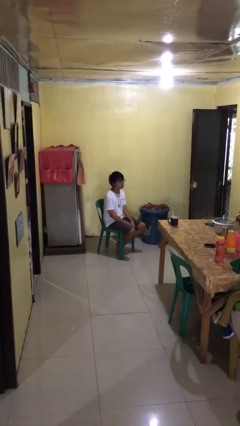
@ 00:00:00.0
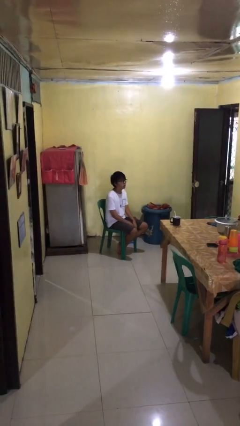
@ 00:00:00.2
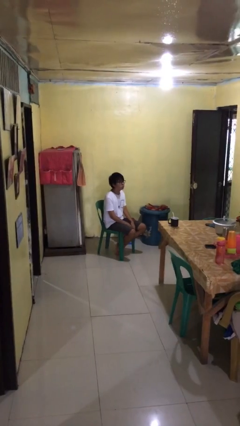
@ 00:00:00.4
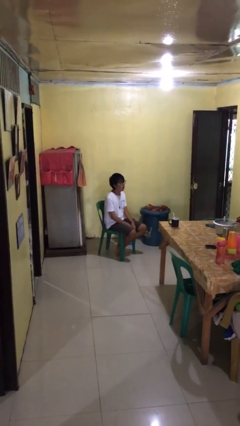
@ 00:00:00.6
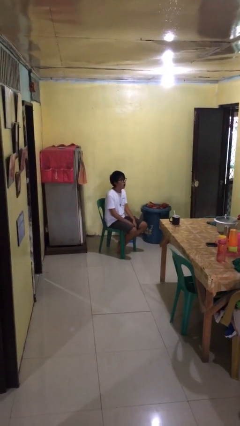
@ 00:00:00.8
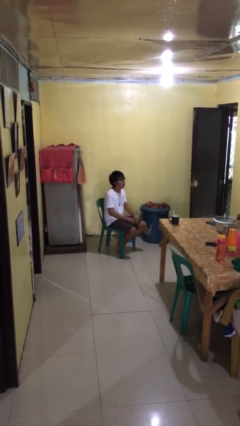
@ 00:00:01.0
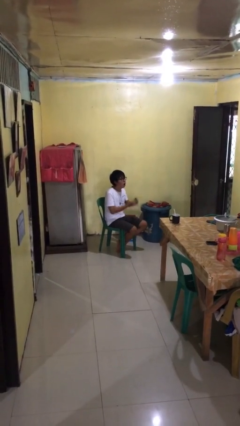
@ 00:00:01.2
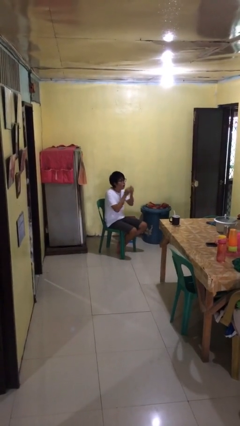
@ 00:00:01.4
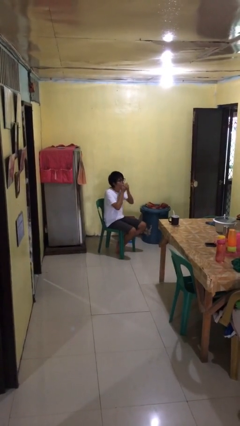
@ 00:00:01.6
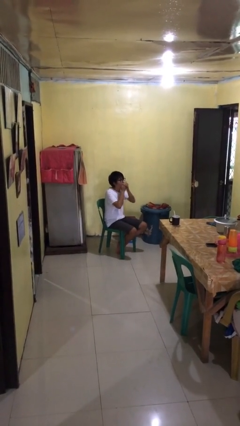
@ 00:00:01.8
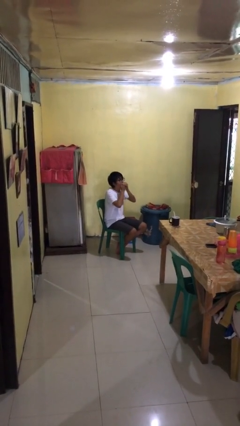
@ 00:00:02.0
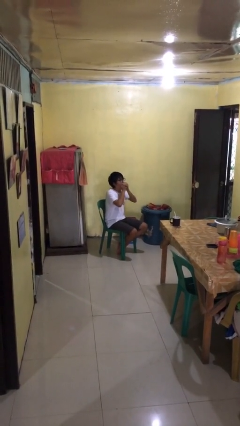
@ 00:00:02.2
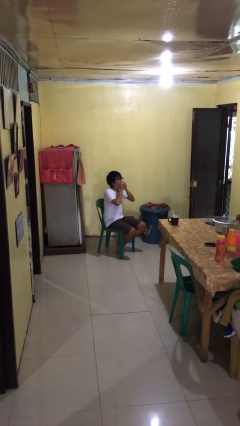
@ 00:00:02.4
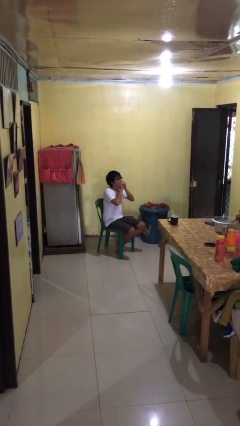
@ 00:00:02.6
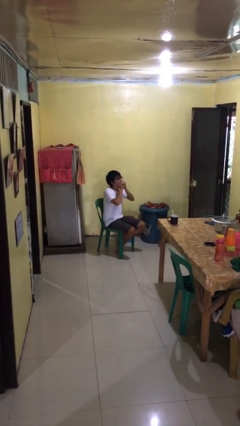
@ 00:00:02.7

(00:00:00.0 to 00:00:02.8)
person yawns

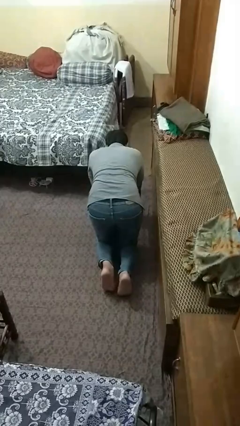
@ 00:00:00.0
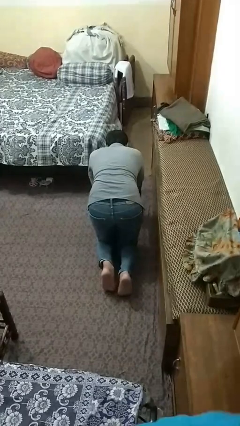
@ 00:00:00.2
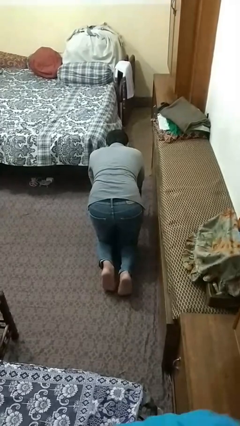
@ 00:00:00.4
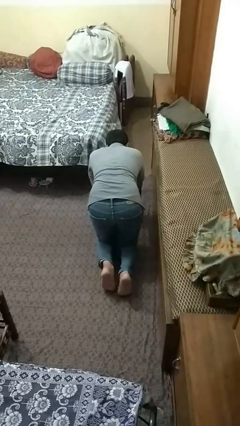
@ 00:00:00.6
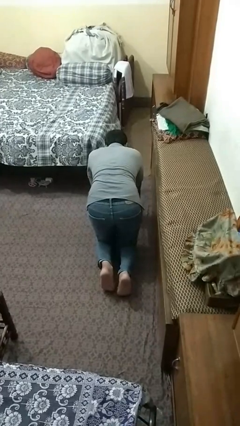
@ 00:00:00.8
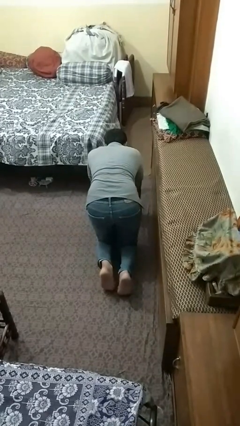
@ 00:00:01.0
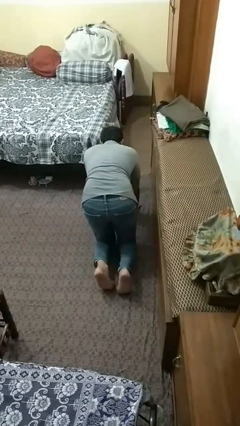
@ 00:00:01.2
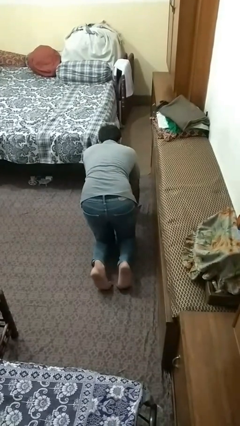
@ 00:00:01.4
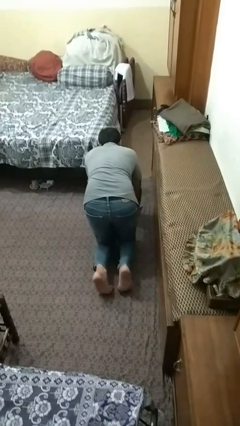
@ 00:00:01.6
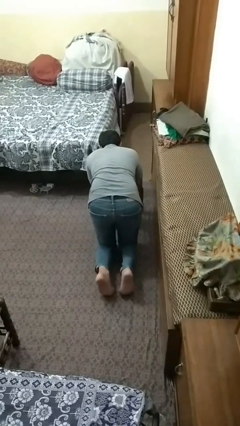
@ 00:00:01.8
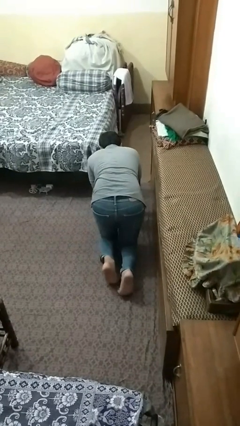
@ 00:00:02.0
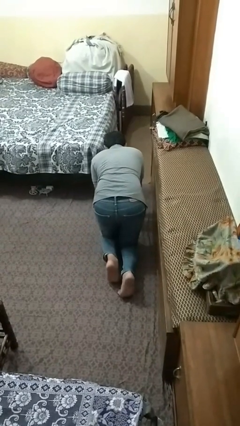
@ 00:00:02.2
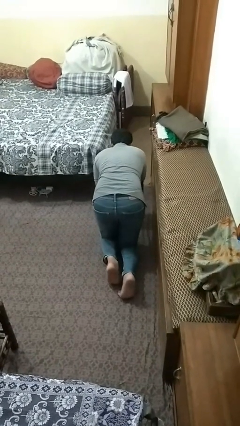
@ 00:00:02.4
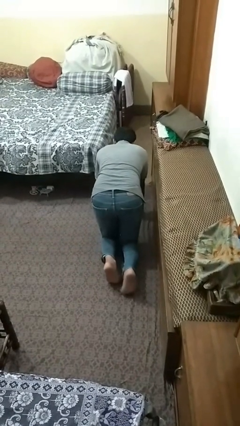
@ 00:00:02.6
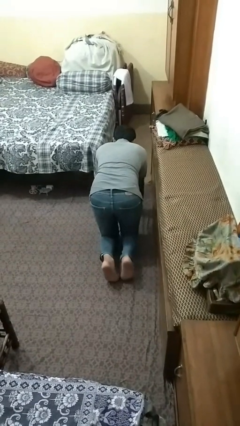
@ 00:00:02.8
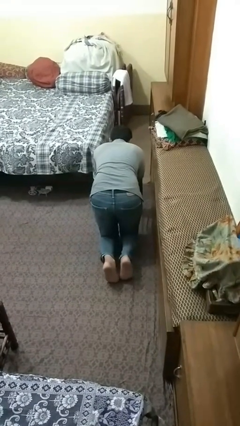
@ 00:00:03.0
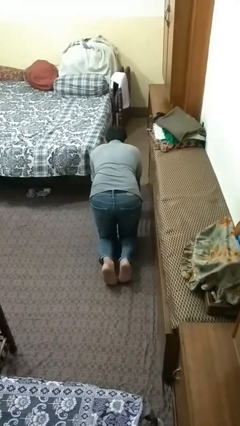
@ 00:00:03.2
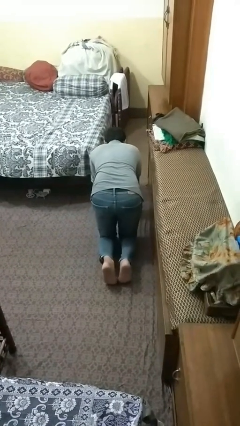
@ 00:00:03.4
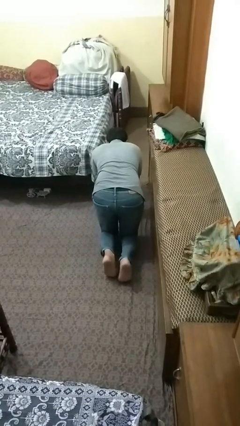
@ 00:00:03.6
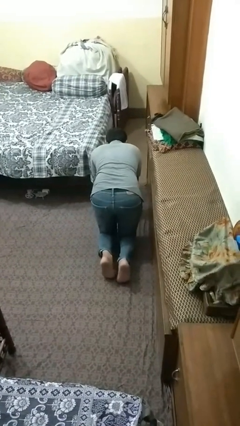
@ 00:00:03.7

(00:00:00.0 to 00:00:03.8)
person crawls

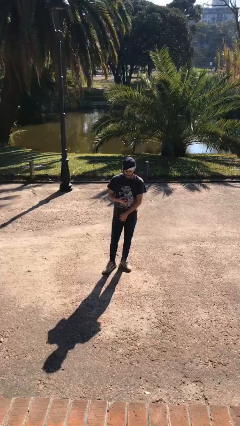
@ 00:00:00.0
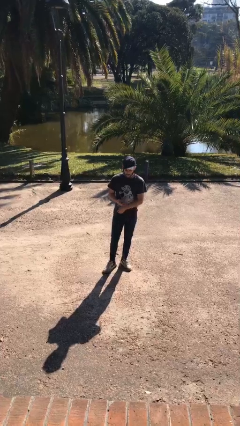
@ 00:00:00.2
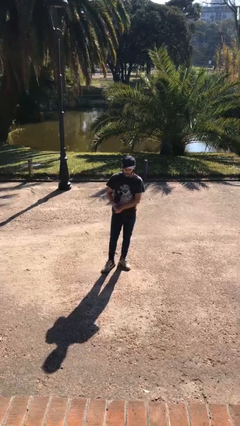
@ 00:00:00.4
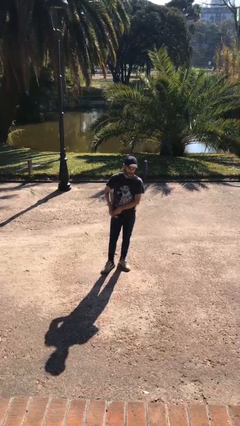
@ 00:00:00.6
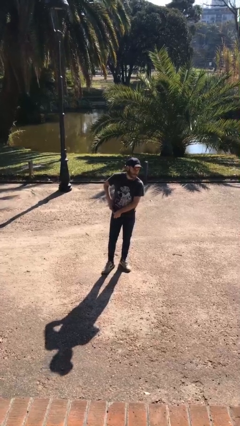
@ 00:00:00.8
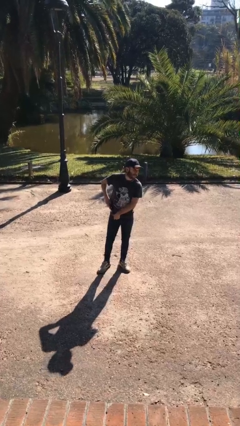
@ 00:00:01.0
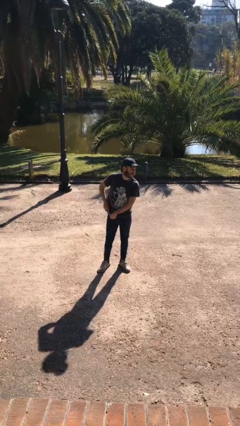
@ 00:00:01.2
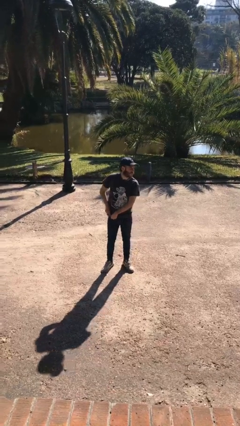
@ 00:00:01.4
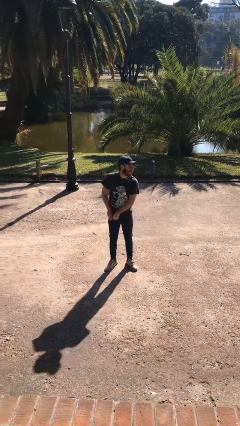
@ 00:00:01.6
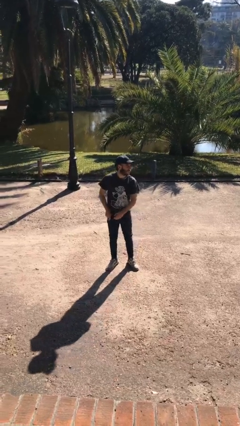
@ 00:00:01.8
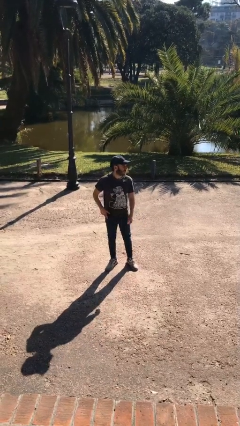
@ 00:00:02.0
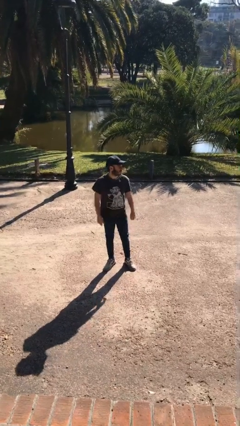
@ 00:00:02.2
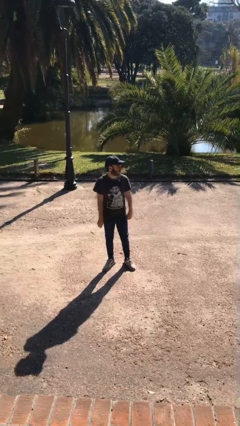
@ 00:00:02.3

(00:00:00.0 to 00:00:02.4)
person puts phone into pocket

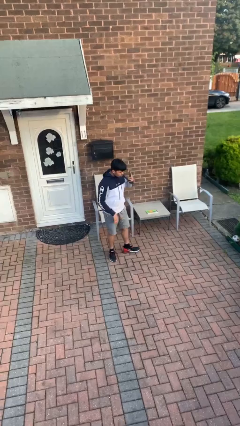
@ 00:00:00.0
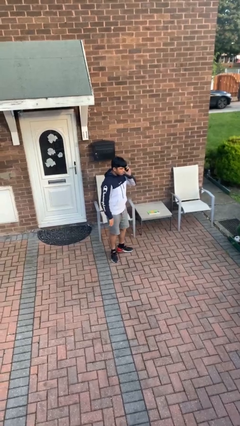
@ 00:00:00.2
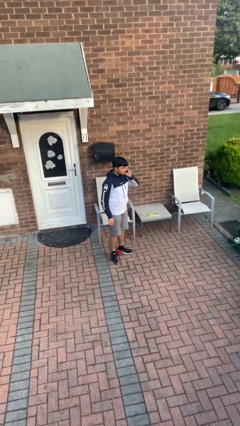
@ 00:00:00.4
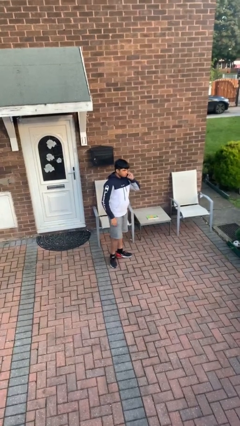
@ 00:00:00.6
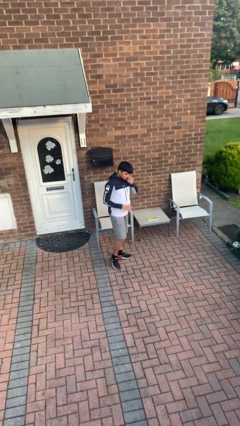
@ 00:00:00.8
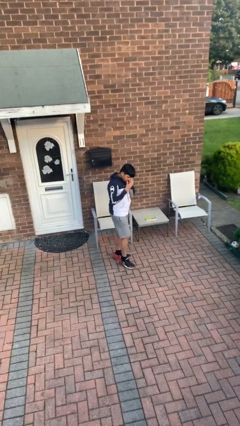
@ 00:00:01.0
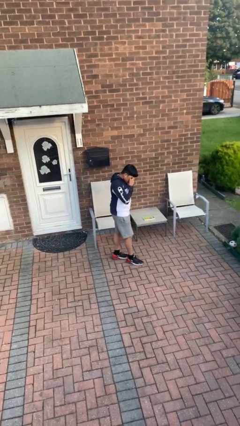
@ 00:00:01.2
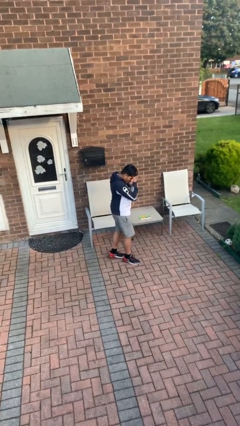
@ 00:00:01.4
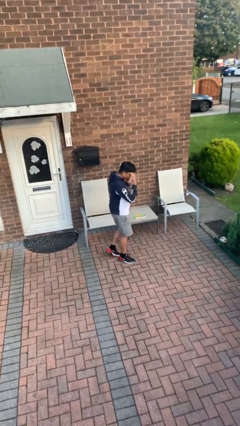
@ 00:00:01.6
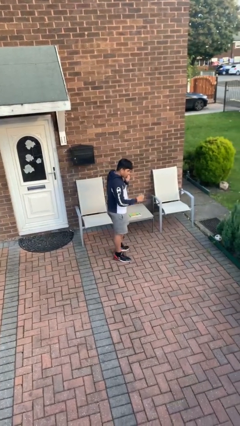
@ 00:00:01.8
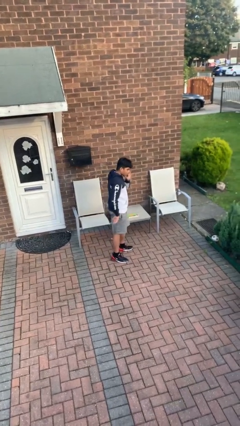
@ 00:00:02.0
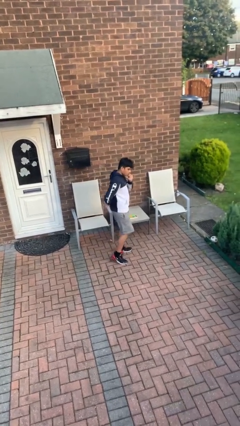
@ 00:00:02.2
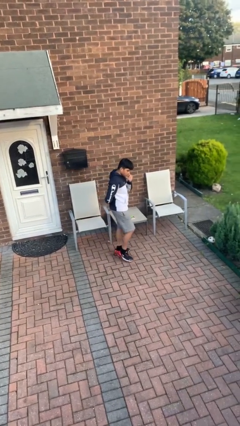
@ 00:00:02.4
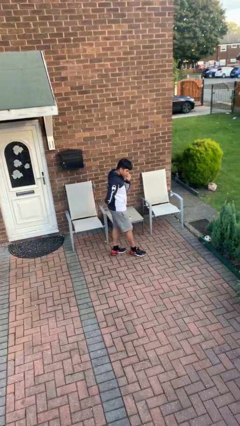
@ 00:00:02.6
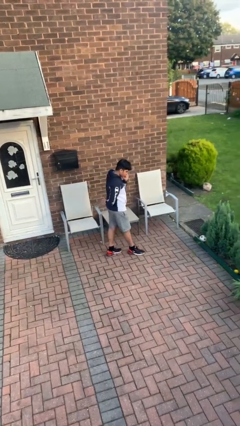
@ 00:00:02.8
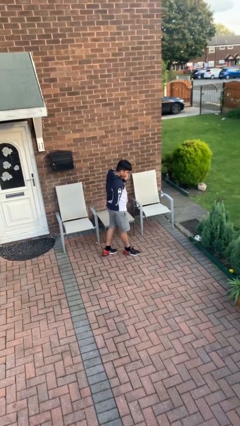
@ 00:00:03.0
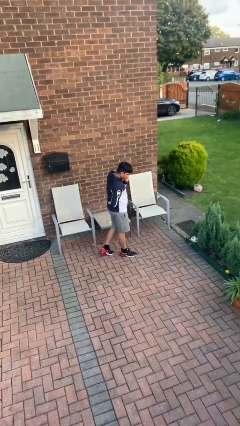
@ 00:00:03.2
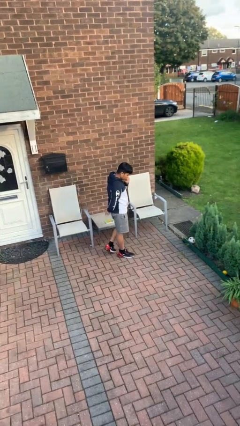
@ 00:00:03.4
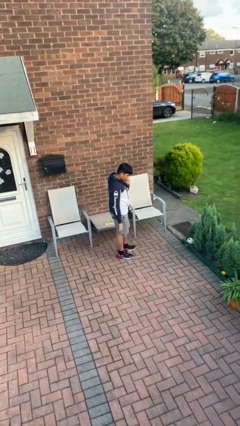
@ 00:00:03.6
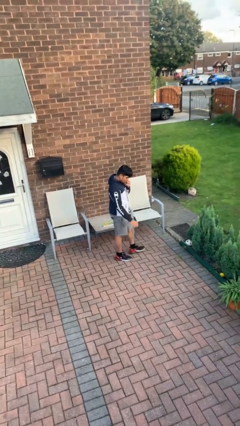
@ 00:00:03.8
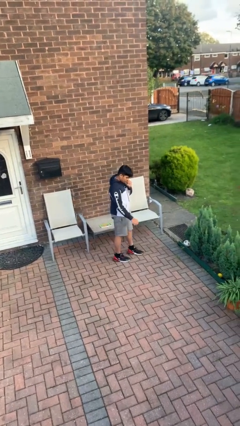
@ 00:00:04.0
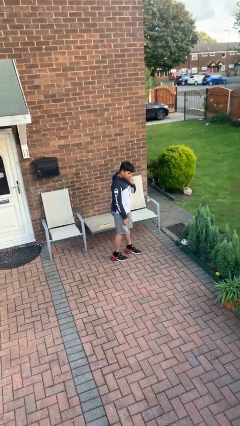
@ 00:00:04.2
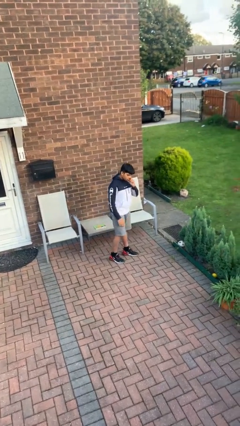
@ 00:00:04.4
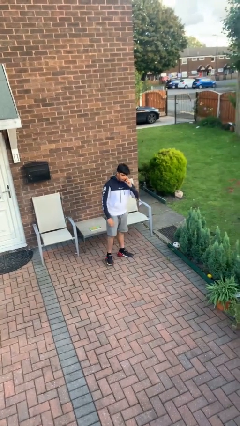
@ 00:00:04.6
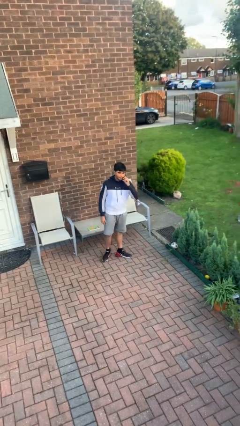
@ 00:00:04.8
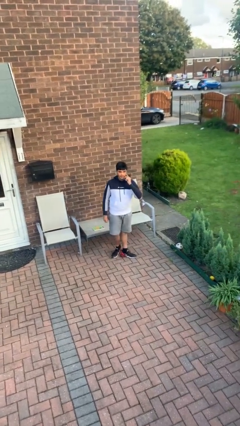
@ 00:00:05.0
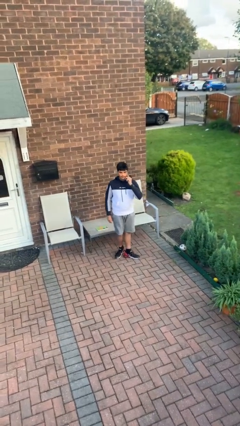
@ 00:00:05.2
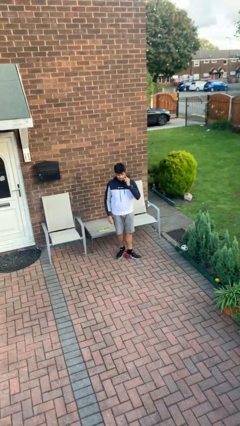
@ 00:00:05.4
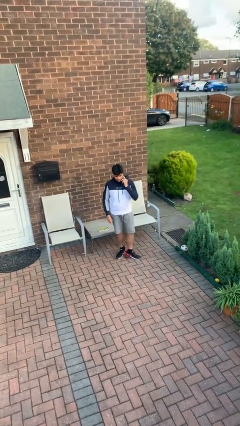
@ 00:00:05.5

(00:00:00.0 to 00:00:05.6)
person talks on phone

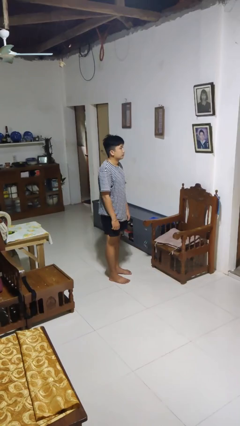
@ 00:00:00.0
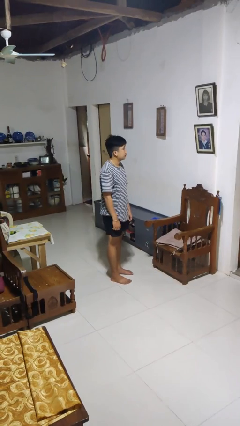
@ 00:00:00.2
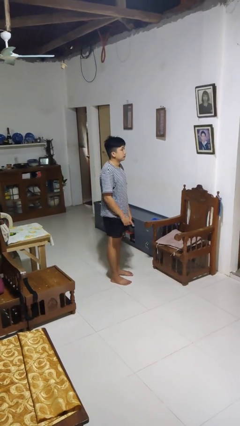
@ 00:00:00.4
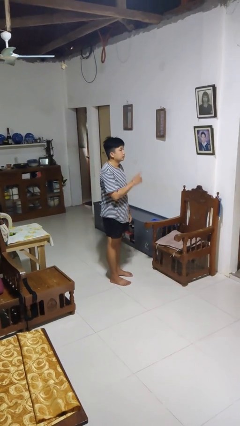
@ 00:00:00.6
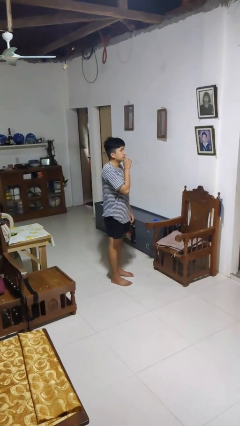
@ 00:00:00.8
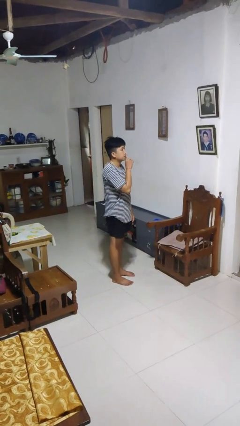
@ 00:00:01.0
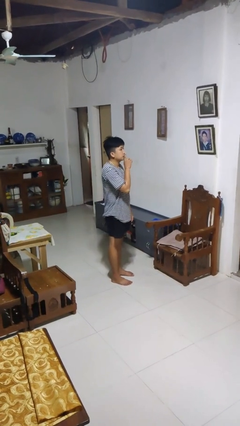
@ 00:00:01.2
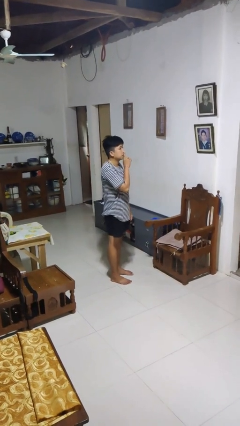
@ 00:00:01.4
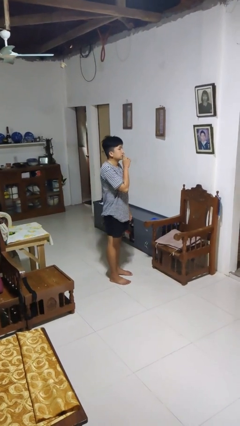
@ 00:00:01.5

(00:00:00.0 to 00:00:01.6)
person gestures be quiet

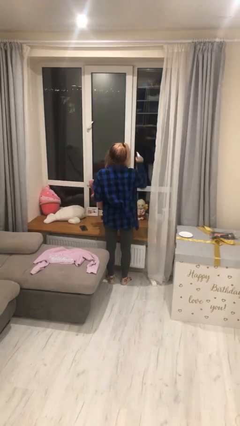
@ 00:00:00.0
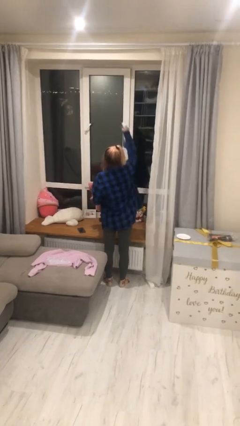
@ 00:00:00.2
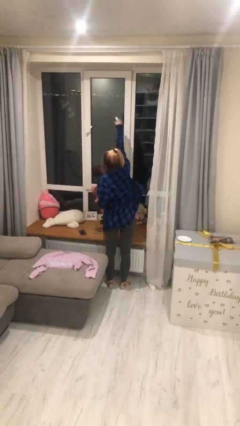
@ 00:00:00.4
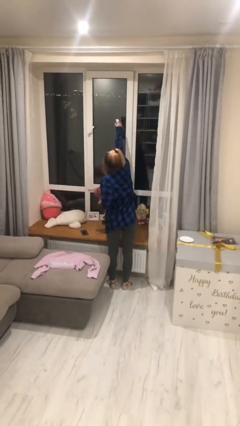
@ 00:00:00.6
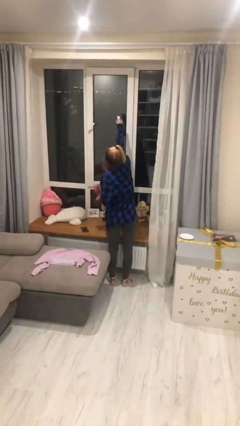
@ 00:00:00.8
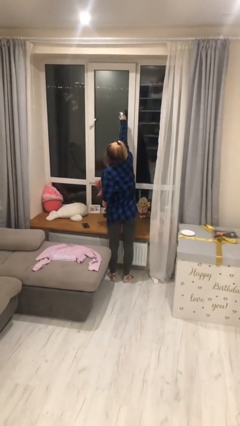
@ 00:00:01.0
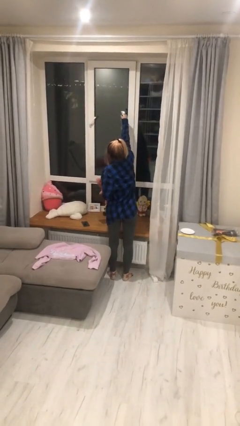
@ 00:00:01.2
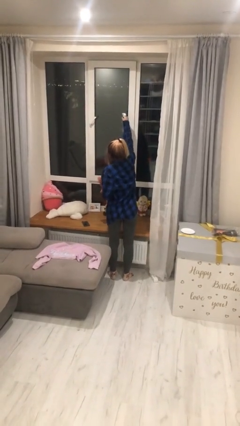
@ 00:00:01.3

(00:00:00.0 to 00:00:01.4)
person sprays from bottle
